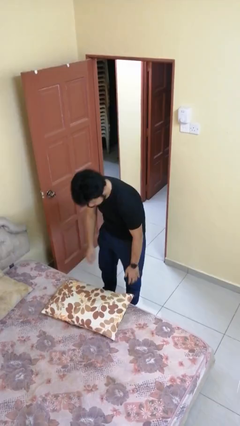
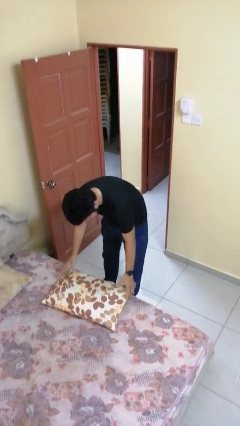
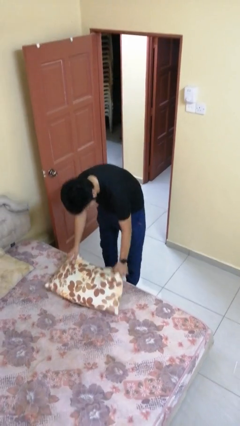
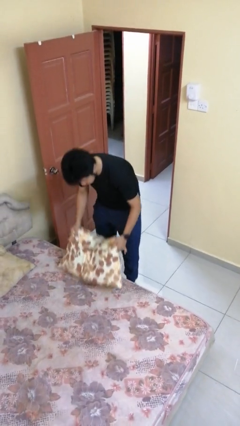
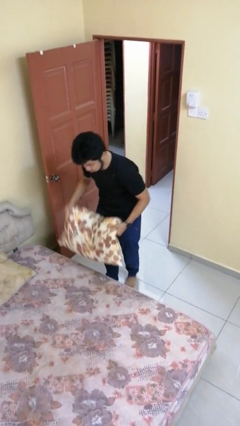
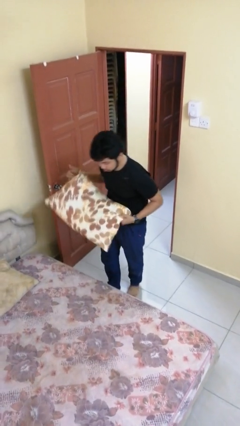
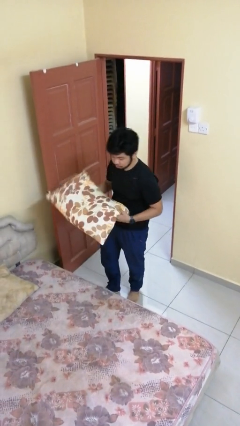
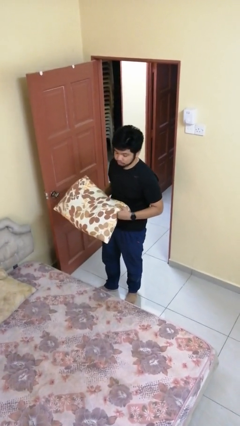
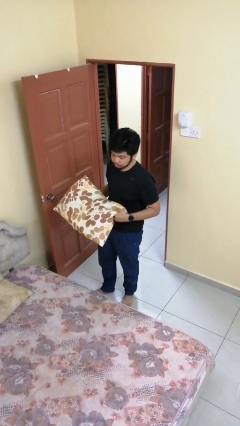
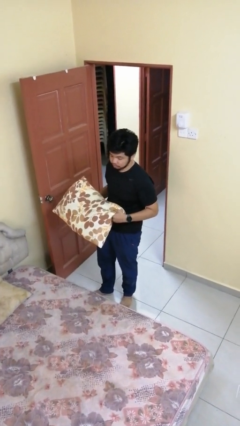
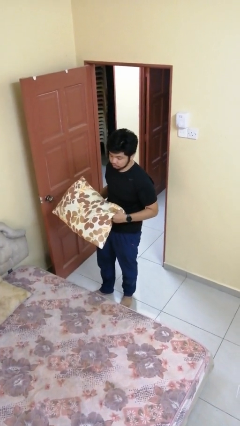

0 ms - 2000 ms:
person picks up object from bed

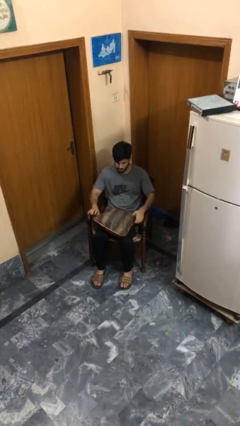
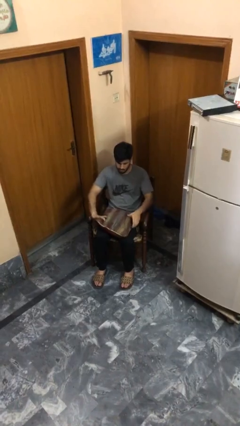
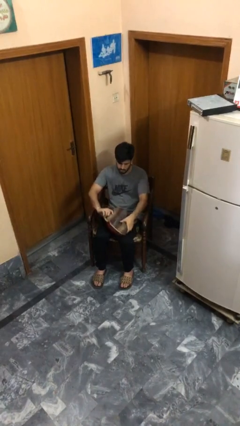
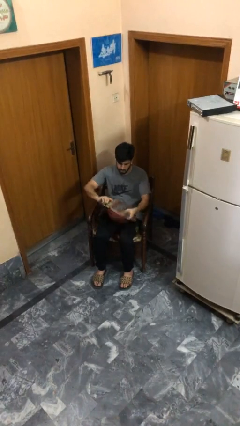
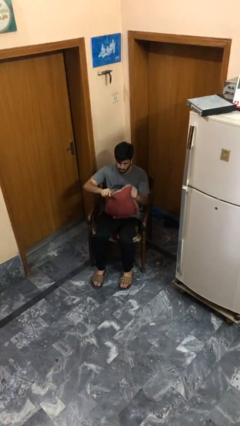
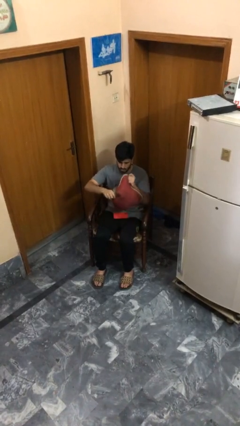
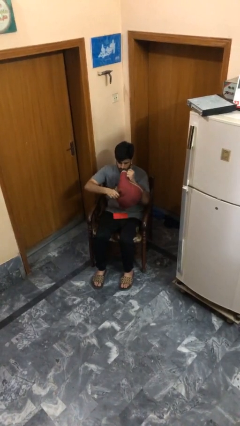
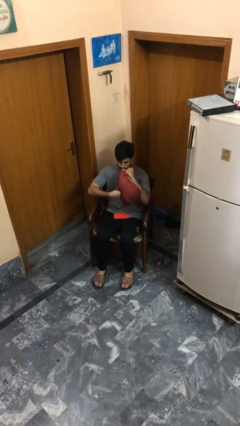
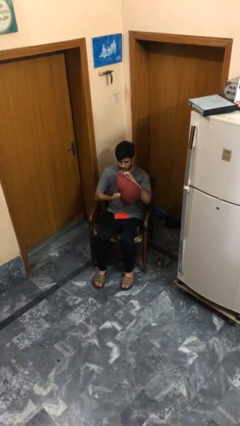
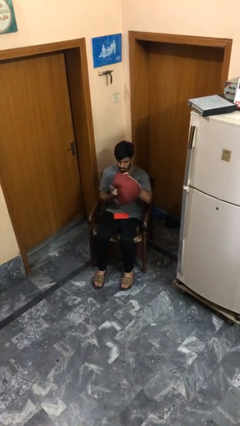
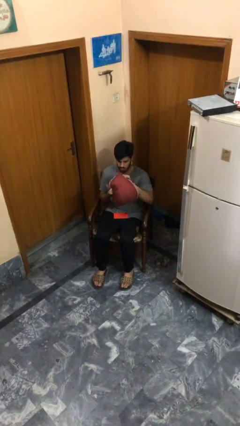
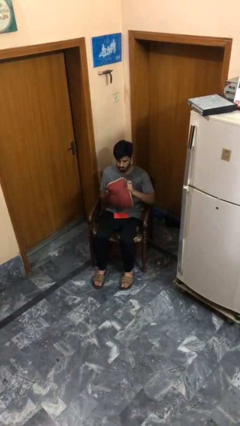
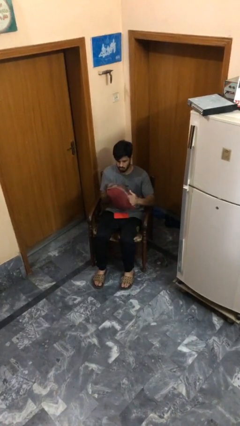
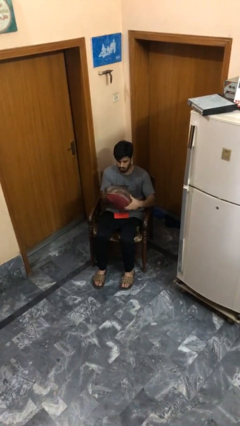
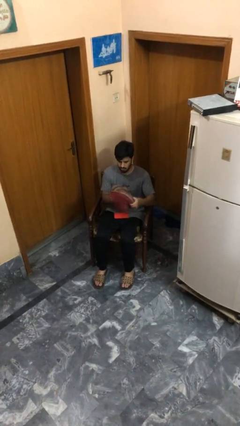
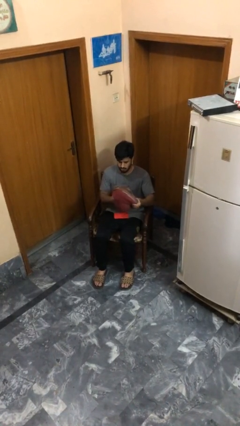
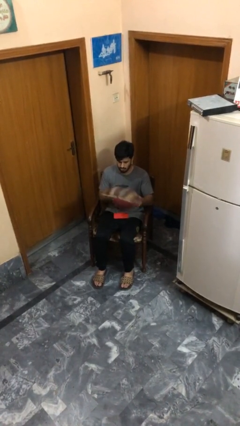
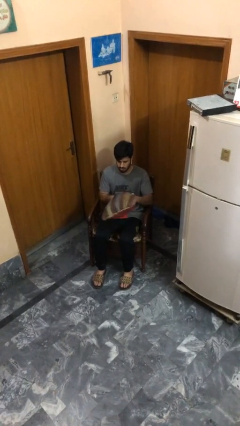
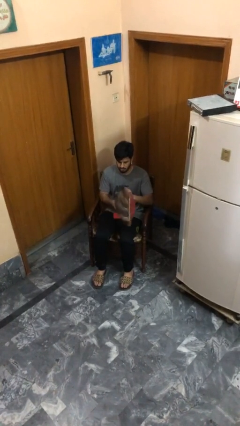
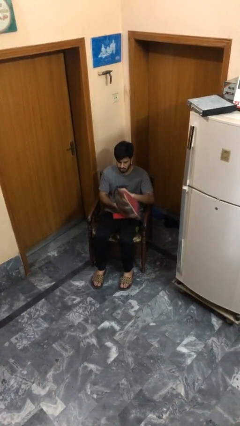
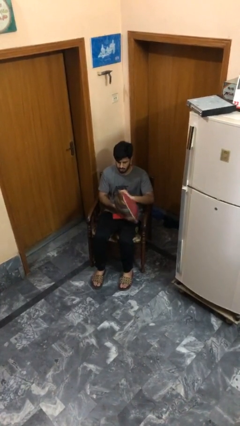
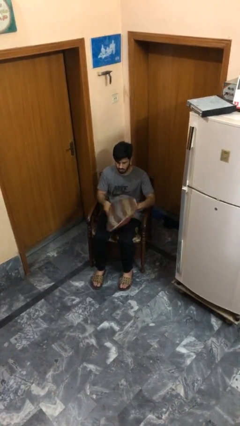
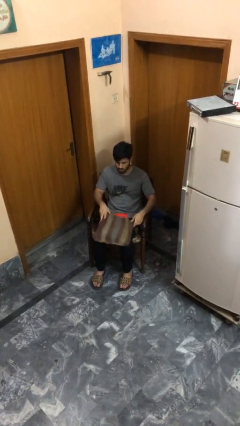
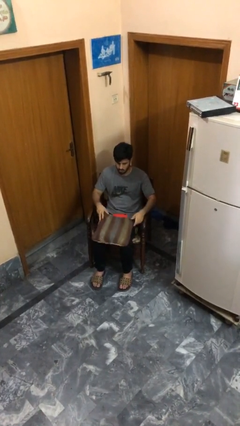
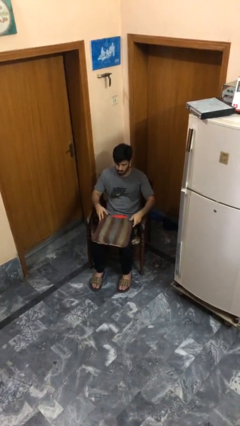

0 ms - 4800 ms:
person squeezes object

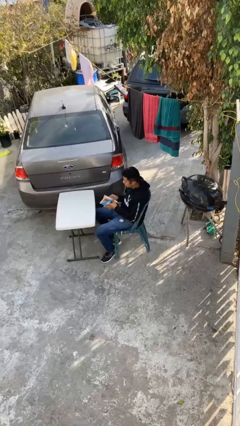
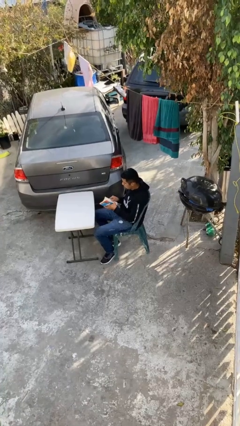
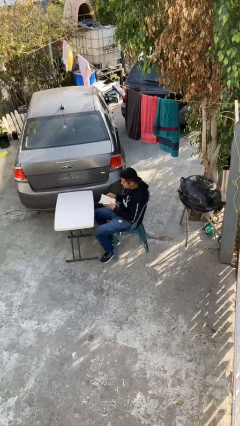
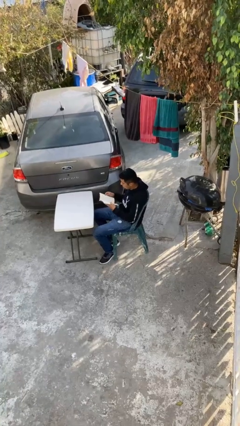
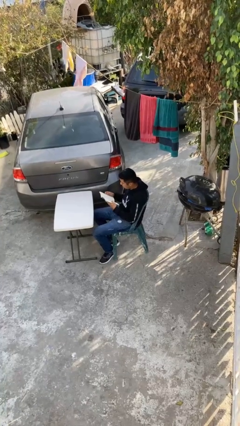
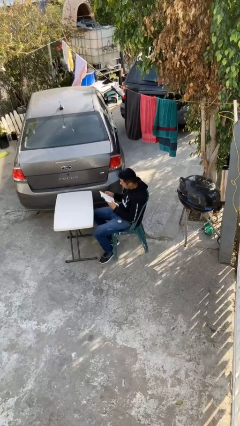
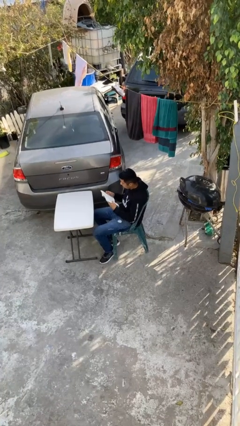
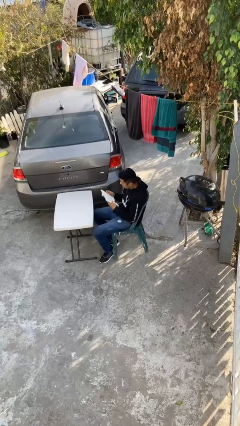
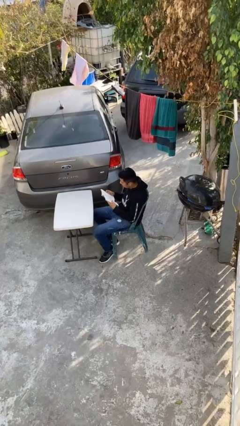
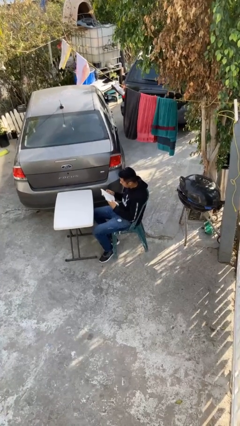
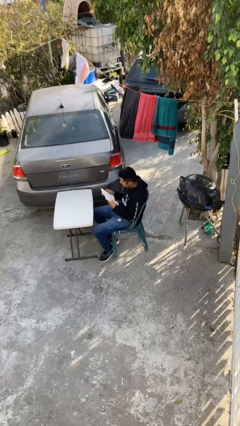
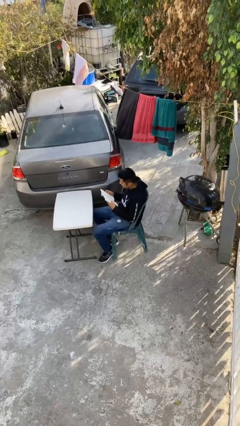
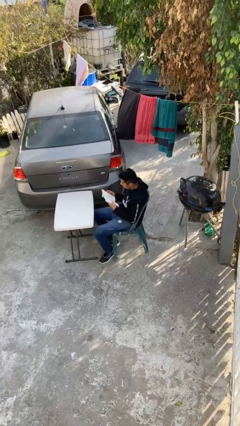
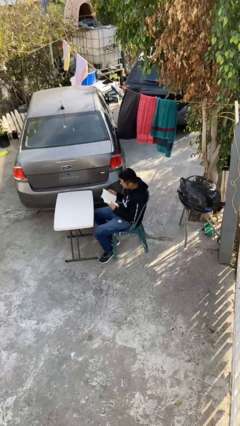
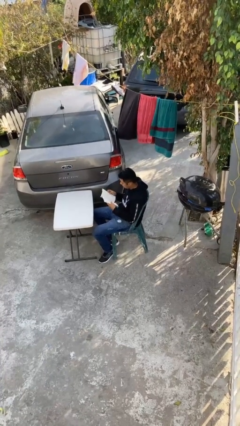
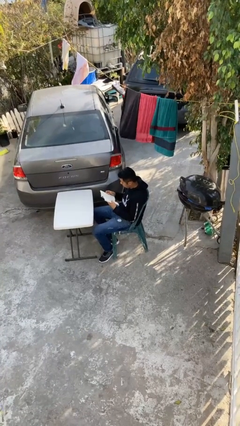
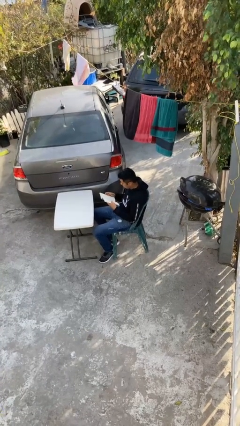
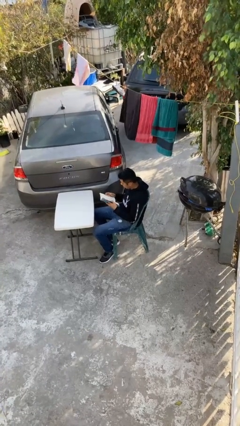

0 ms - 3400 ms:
person reads document

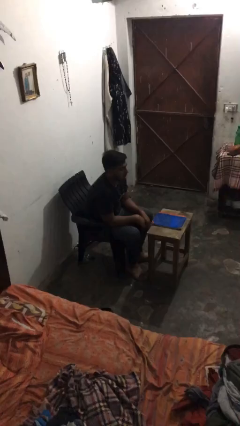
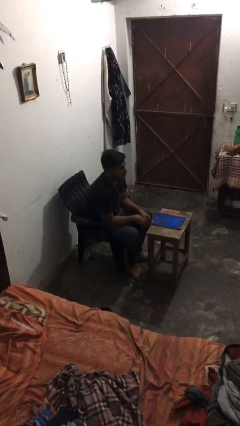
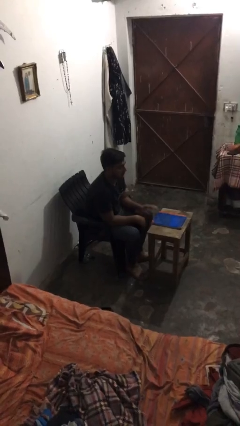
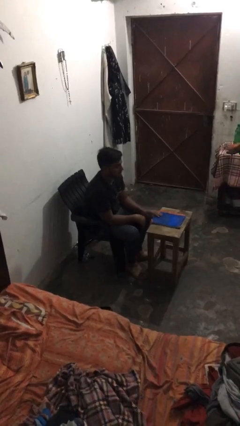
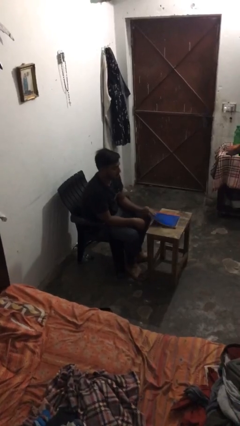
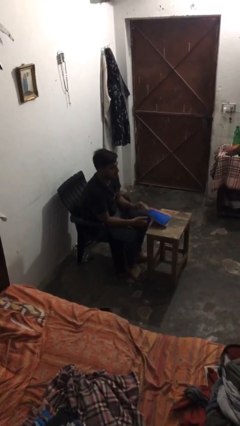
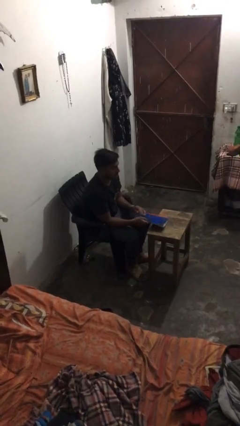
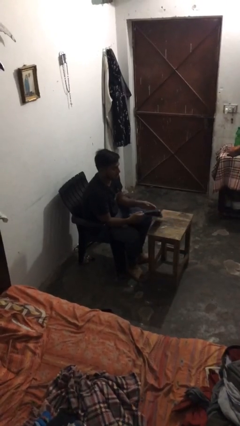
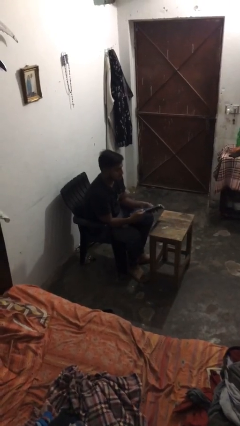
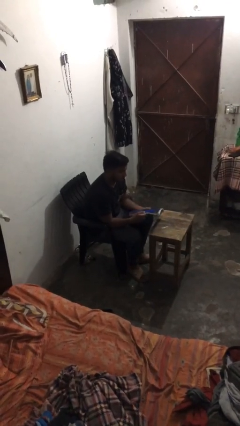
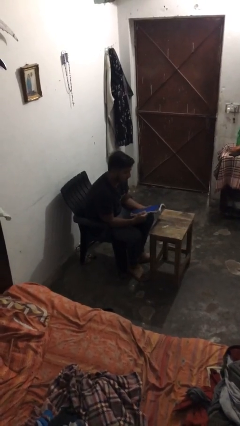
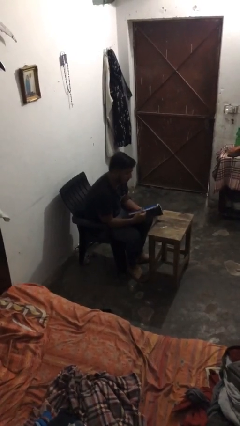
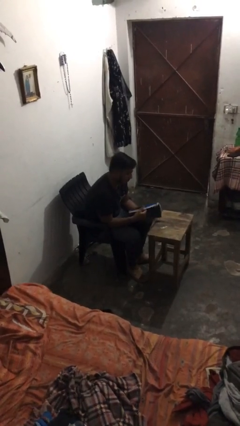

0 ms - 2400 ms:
person picks up object from table

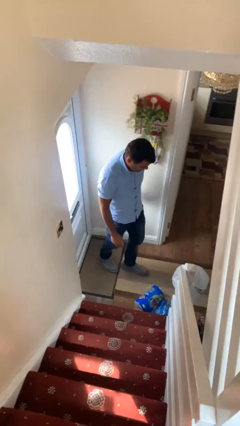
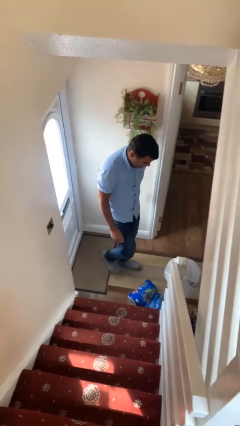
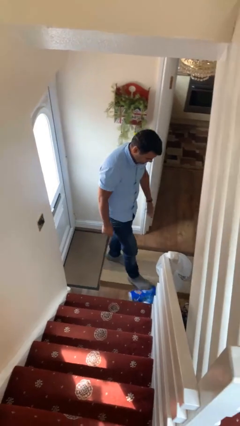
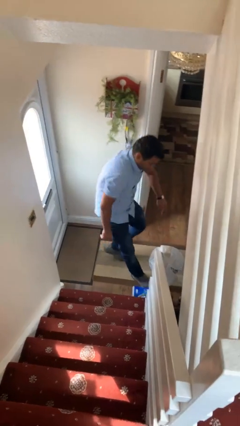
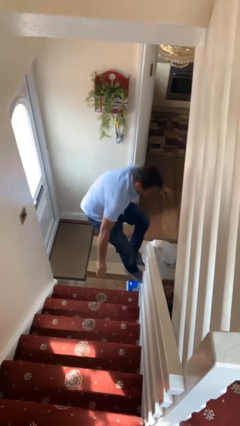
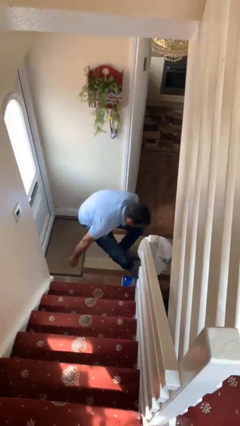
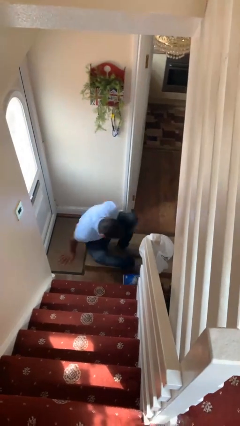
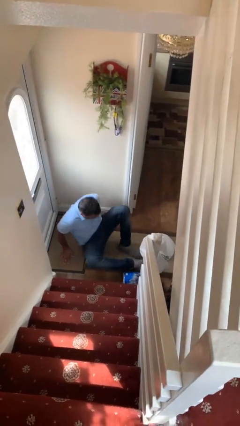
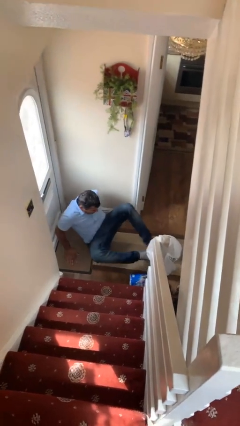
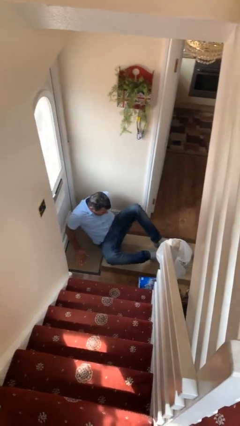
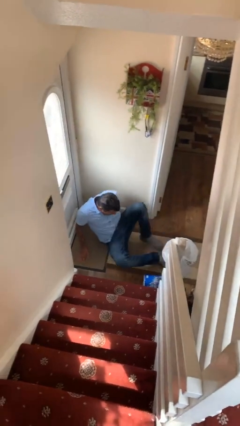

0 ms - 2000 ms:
person trips on object on floor

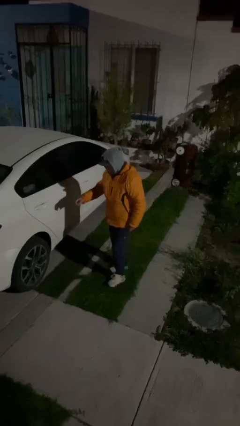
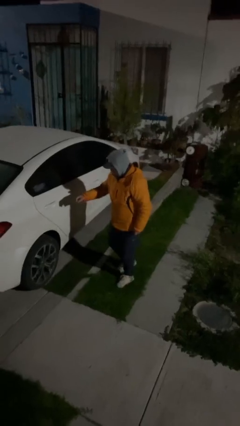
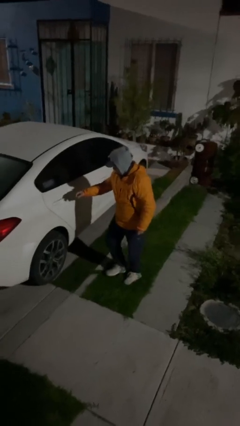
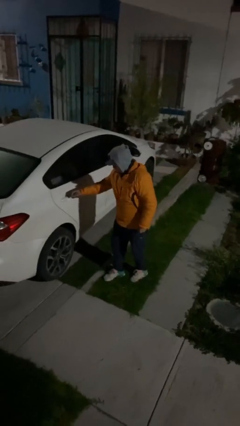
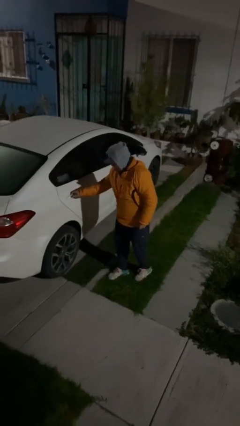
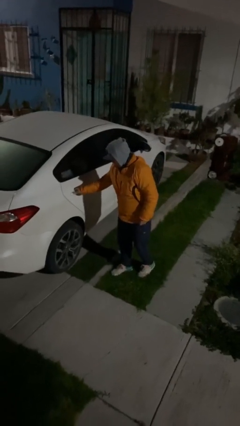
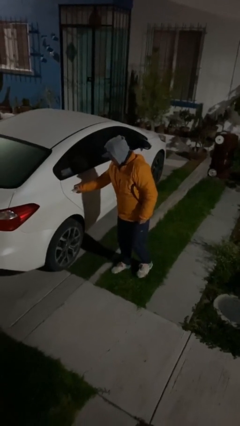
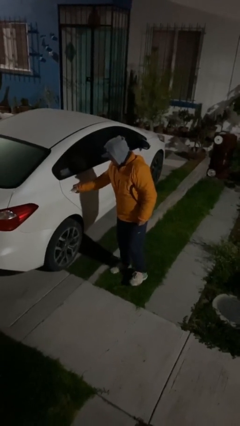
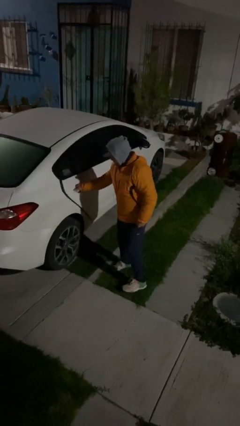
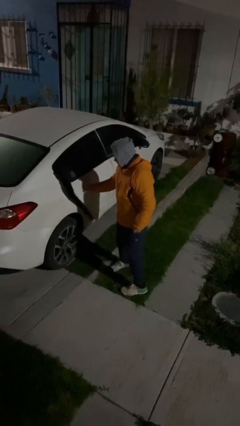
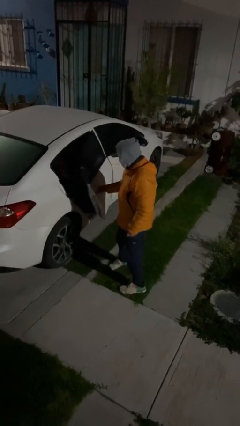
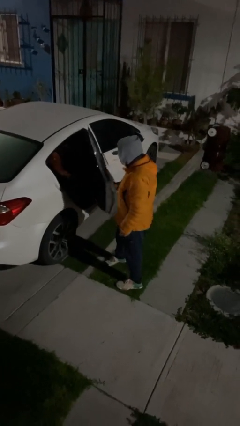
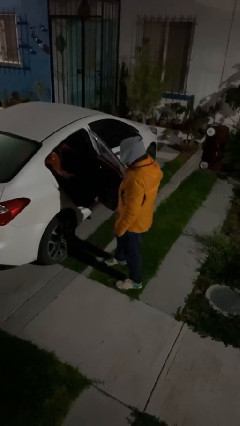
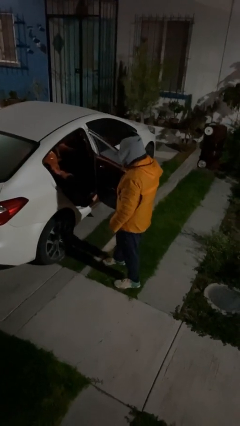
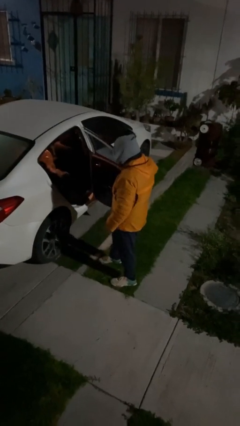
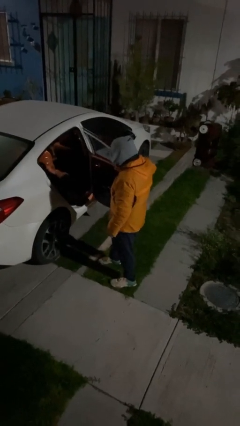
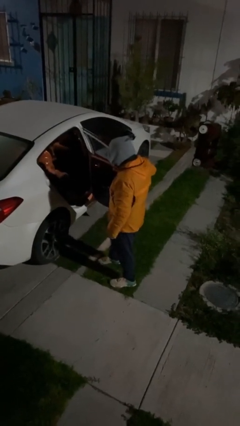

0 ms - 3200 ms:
person opens car door
